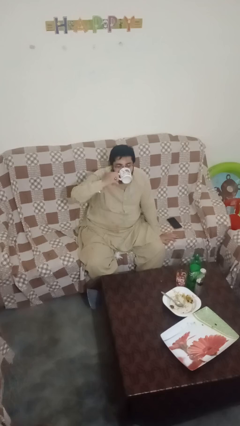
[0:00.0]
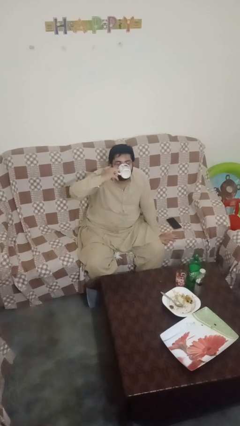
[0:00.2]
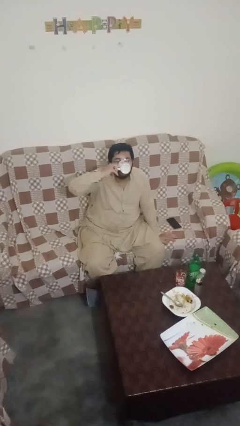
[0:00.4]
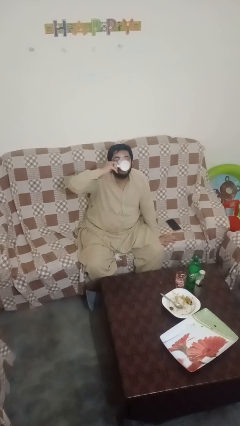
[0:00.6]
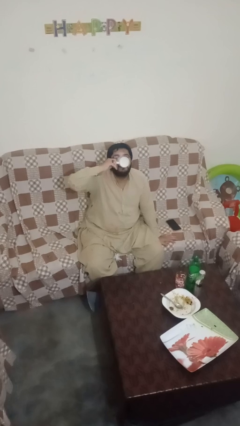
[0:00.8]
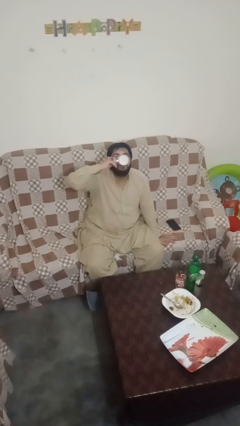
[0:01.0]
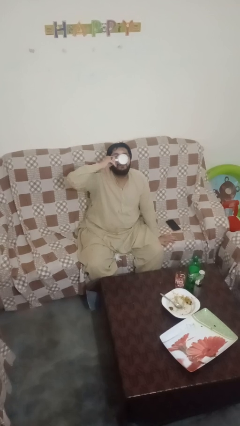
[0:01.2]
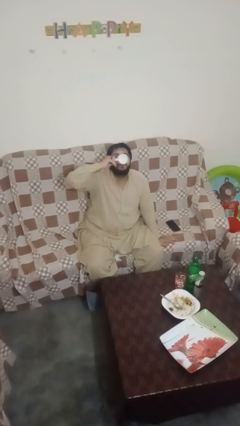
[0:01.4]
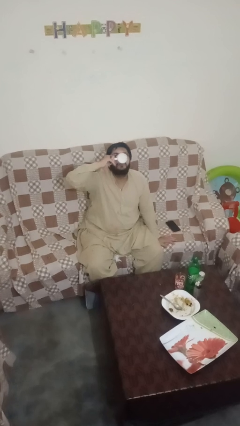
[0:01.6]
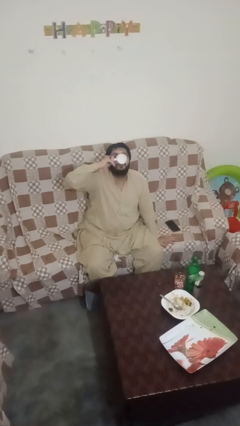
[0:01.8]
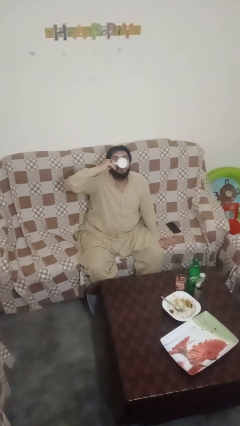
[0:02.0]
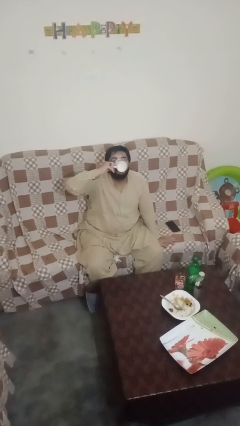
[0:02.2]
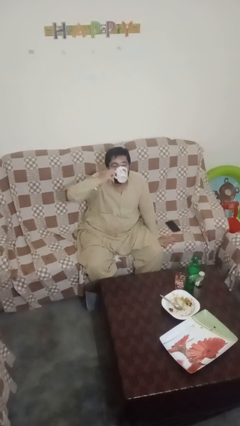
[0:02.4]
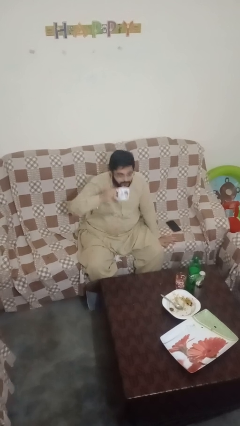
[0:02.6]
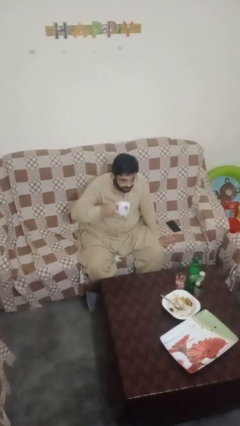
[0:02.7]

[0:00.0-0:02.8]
person drinks from mug

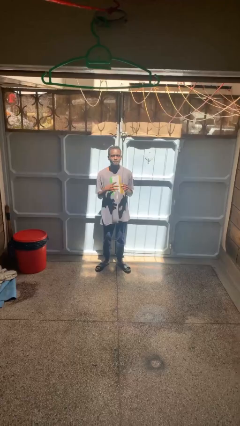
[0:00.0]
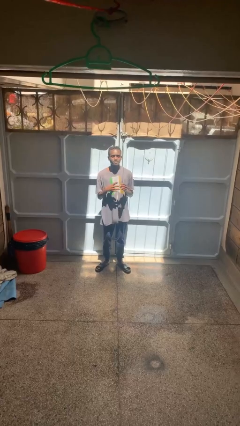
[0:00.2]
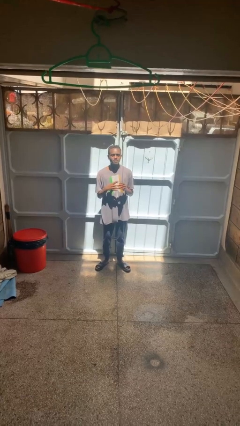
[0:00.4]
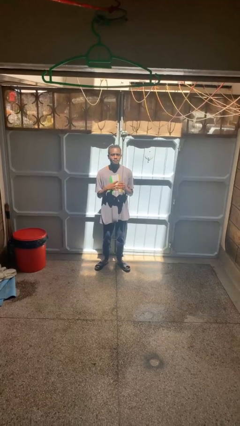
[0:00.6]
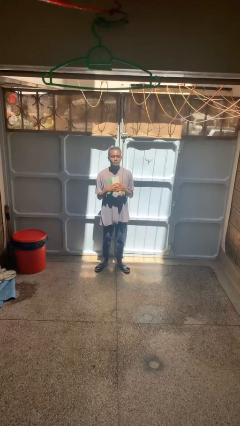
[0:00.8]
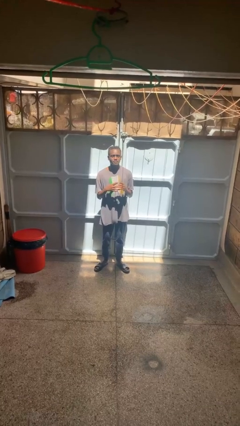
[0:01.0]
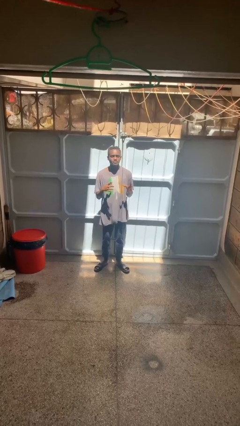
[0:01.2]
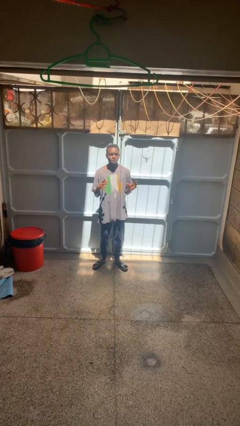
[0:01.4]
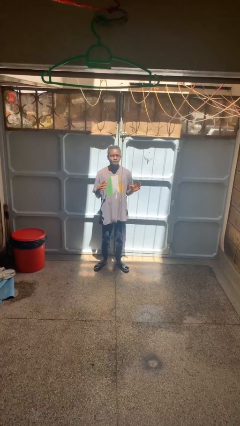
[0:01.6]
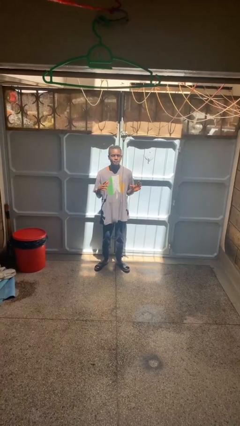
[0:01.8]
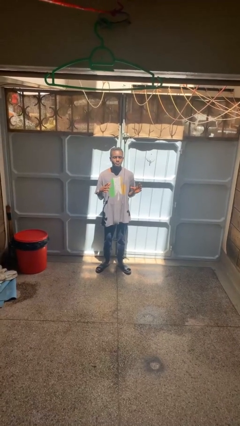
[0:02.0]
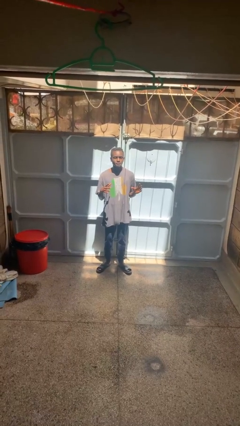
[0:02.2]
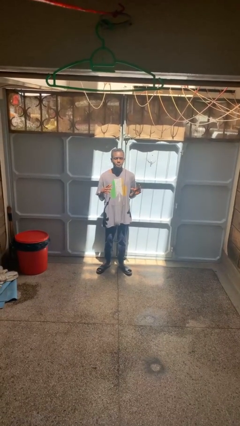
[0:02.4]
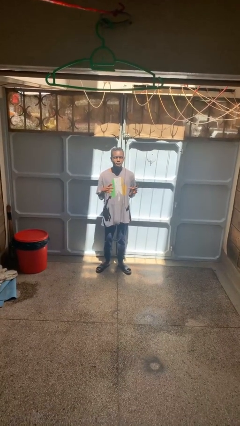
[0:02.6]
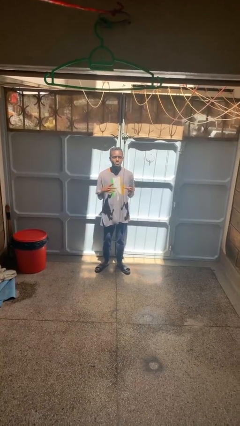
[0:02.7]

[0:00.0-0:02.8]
person puts on ring

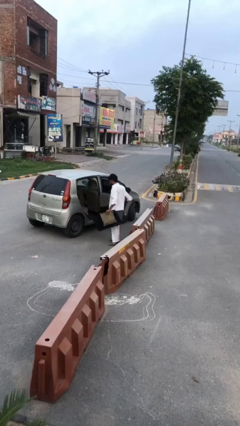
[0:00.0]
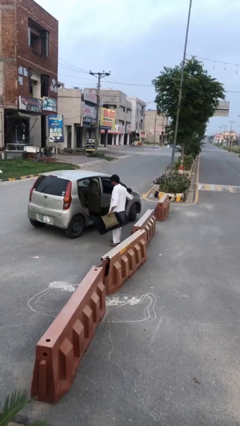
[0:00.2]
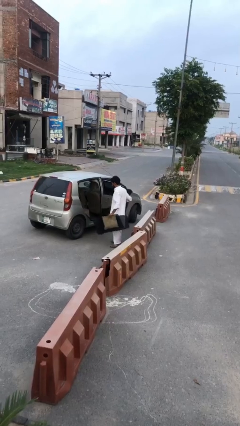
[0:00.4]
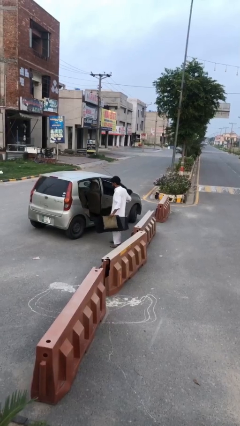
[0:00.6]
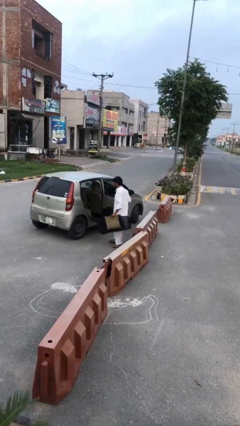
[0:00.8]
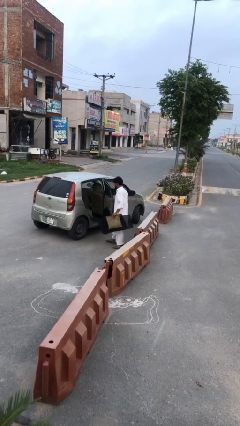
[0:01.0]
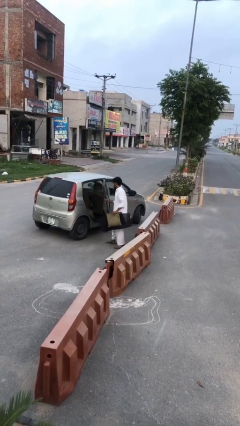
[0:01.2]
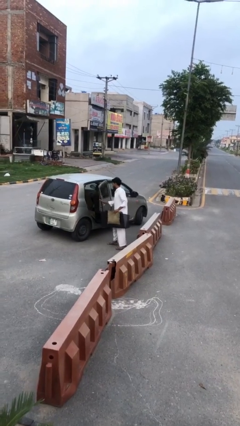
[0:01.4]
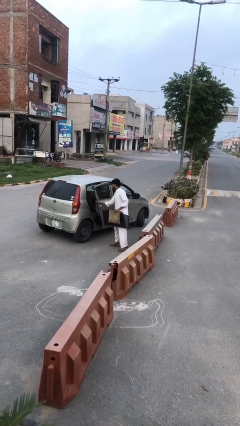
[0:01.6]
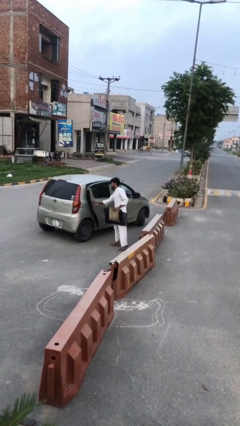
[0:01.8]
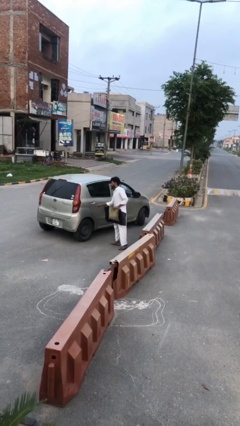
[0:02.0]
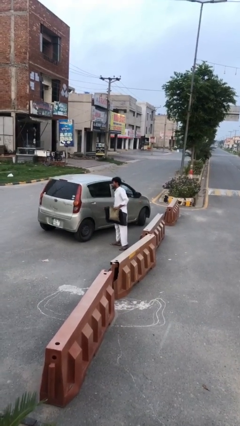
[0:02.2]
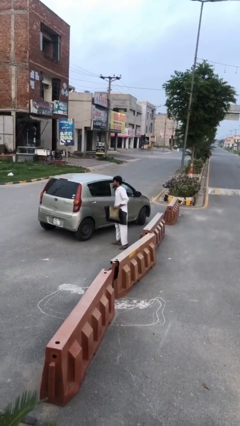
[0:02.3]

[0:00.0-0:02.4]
person closes car door

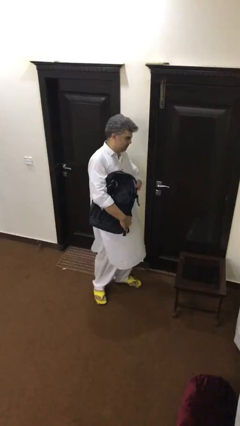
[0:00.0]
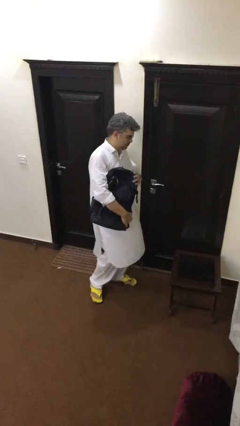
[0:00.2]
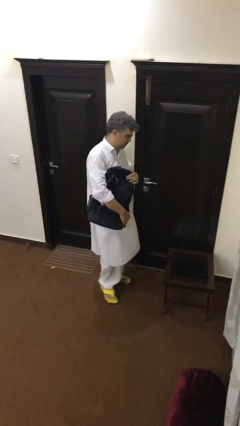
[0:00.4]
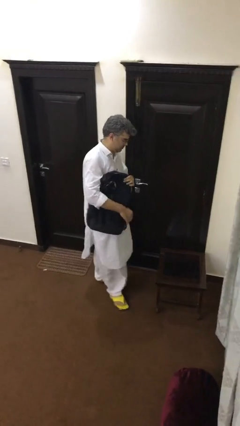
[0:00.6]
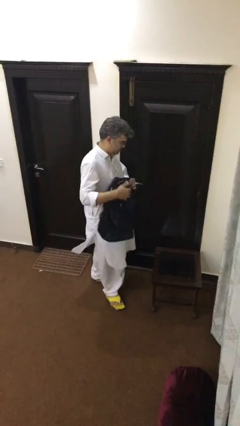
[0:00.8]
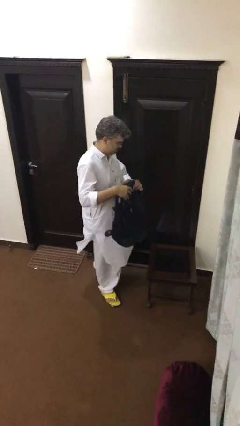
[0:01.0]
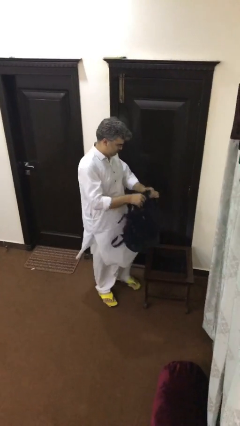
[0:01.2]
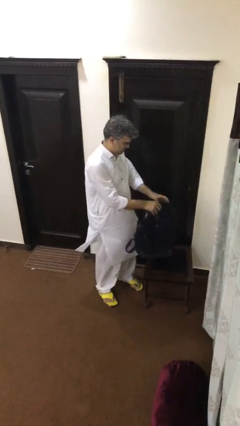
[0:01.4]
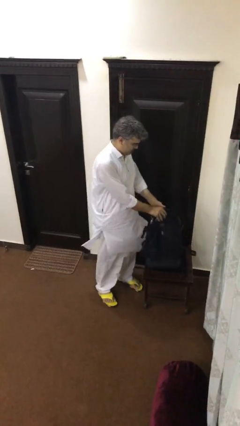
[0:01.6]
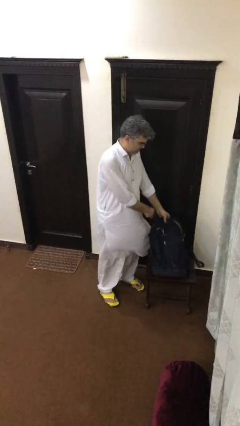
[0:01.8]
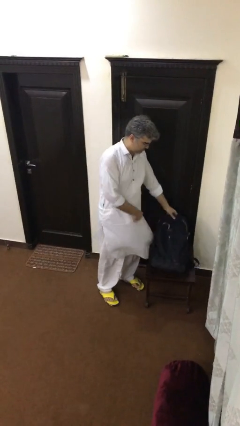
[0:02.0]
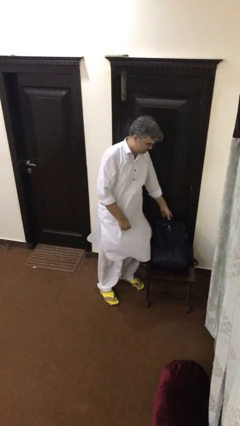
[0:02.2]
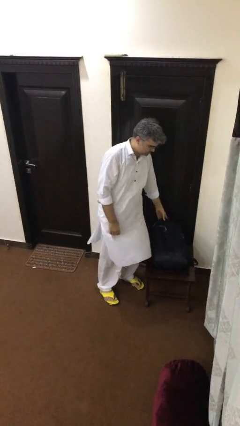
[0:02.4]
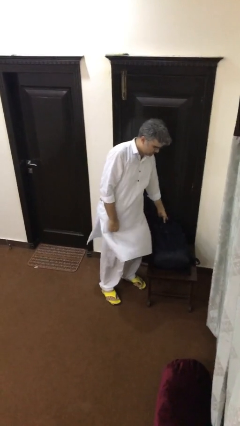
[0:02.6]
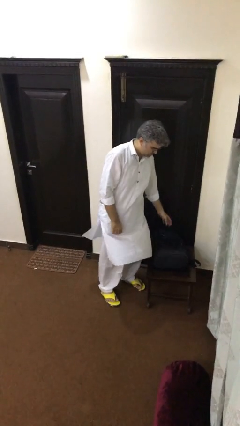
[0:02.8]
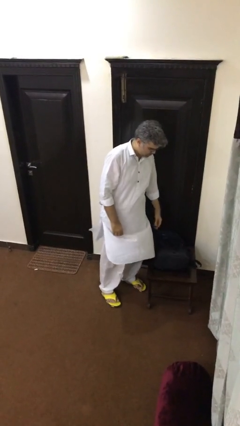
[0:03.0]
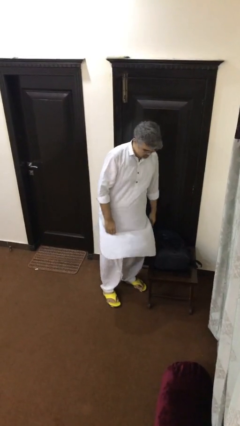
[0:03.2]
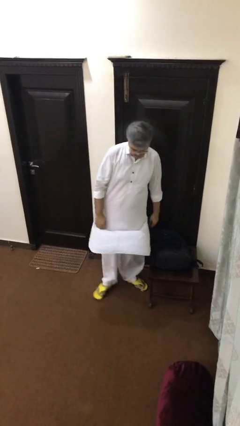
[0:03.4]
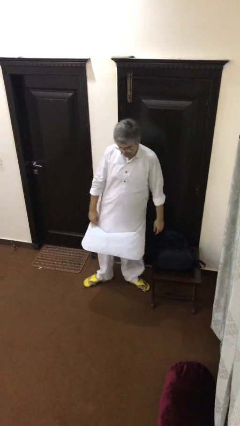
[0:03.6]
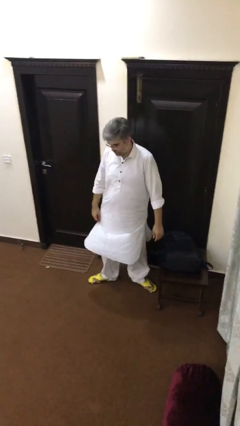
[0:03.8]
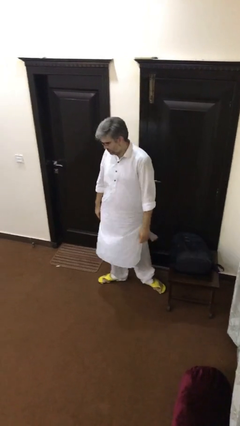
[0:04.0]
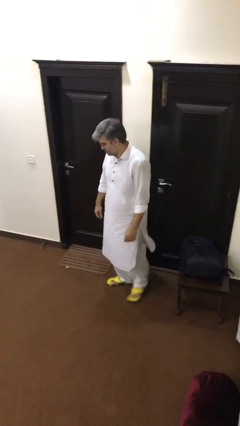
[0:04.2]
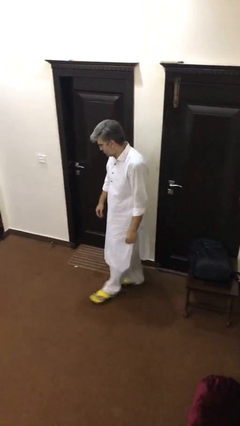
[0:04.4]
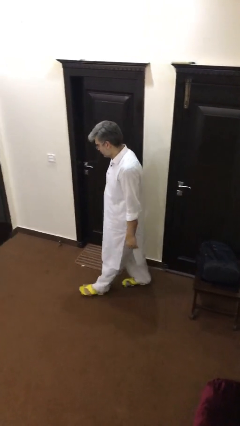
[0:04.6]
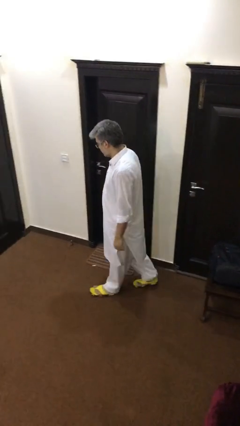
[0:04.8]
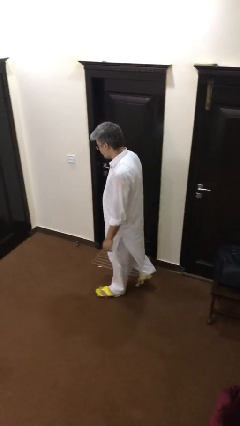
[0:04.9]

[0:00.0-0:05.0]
person puts down object on table

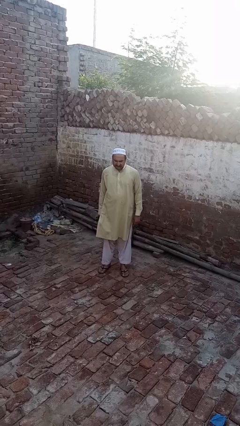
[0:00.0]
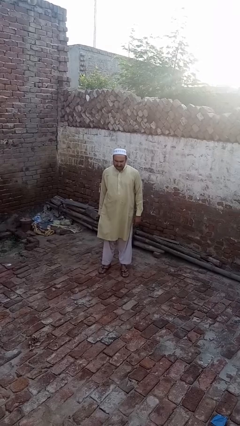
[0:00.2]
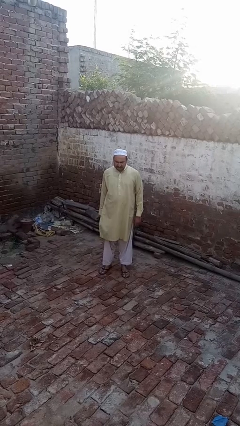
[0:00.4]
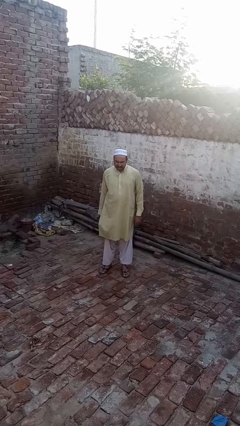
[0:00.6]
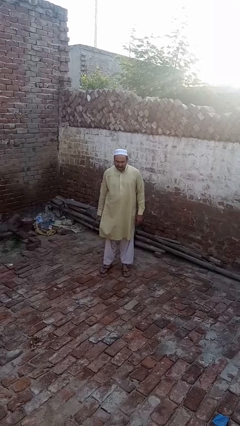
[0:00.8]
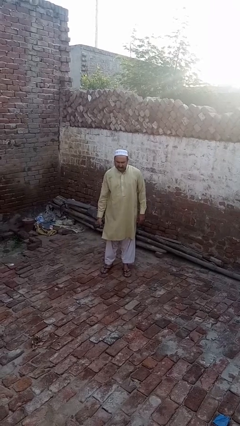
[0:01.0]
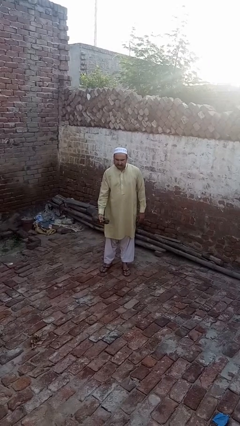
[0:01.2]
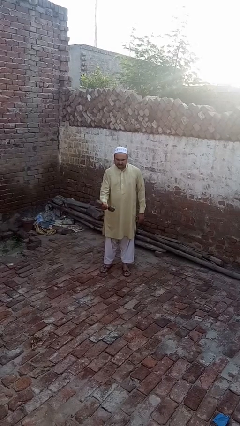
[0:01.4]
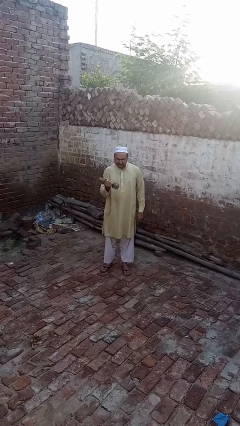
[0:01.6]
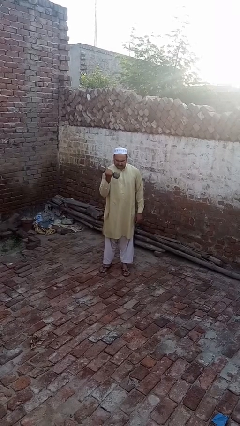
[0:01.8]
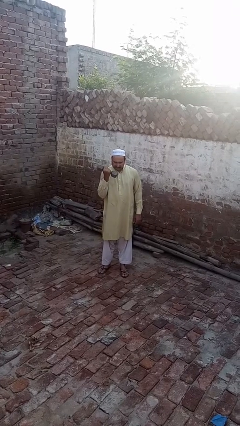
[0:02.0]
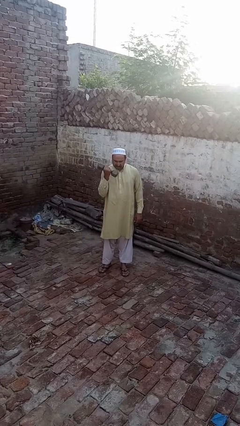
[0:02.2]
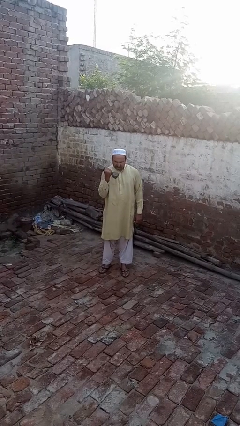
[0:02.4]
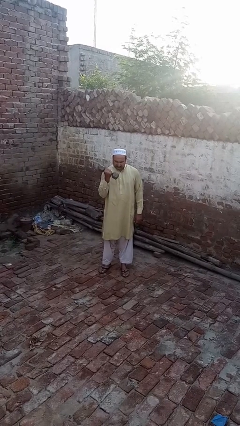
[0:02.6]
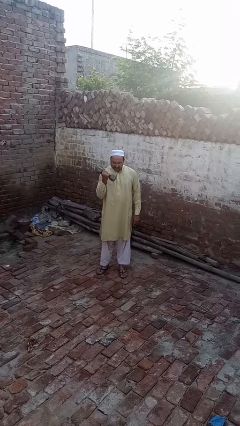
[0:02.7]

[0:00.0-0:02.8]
person lifts dumbbells

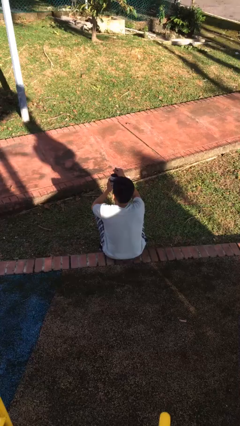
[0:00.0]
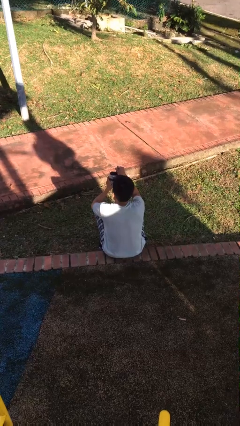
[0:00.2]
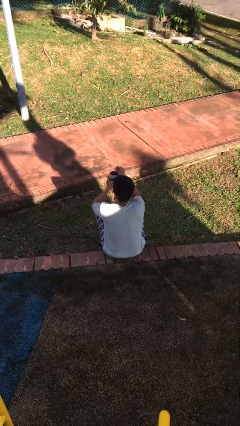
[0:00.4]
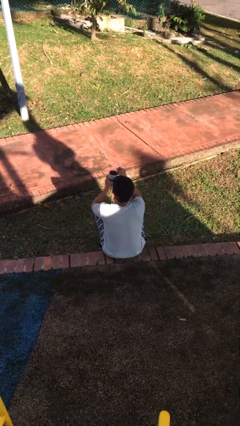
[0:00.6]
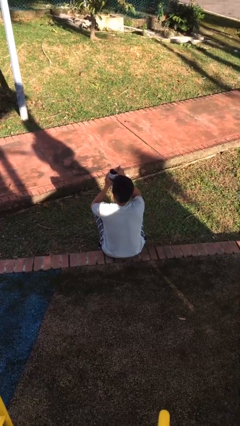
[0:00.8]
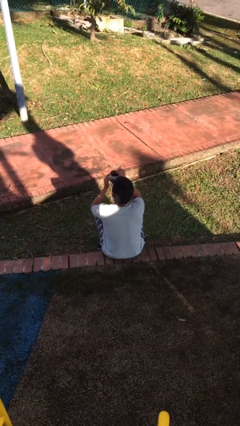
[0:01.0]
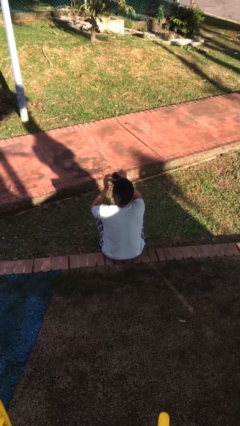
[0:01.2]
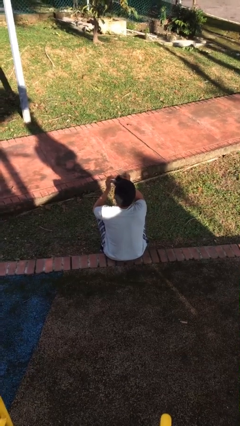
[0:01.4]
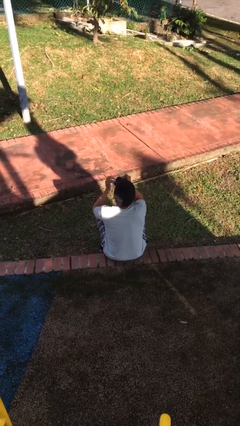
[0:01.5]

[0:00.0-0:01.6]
person stirs mug

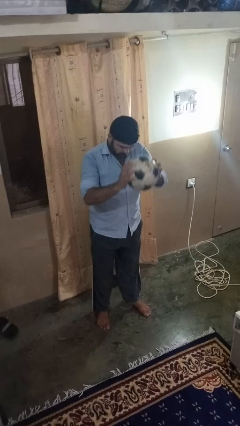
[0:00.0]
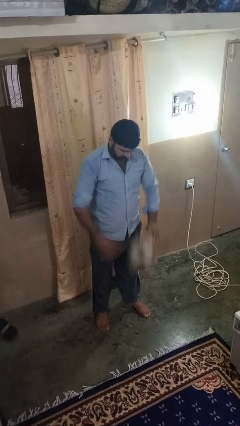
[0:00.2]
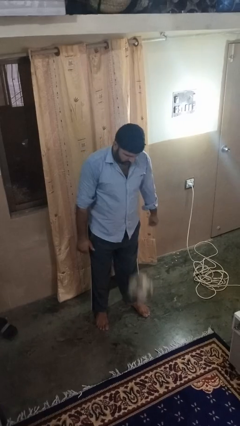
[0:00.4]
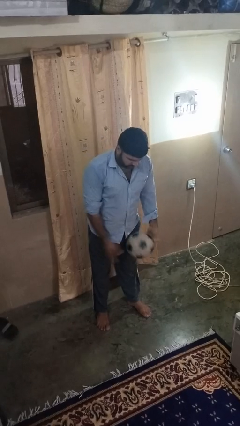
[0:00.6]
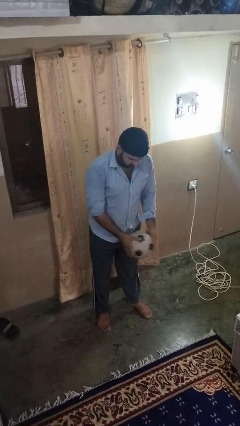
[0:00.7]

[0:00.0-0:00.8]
person bounces ball on floor
